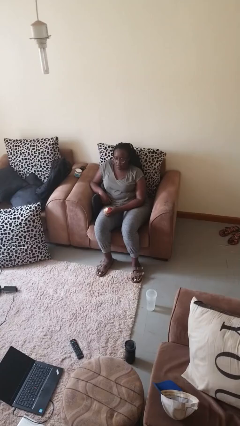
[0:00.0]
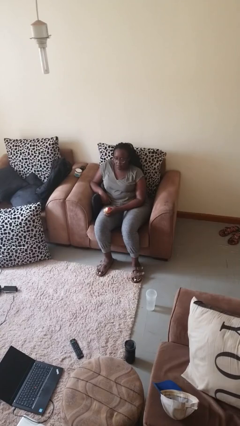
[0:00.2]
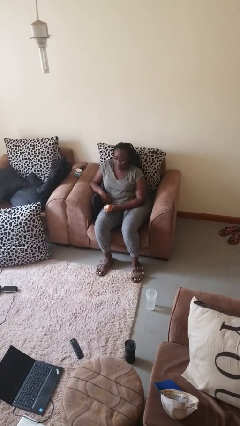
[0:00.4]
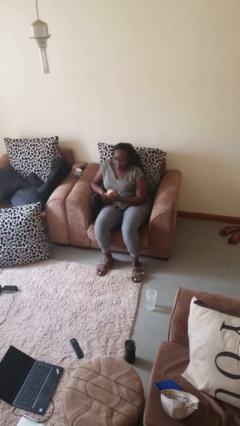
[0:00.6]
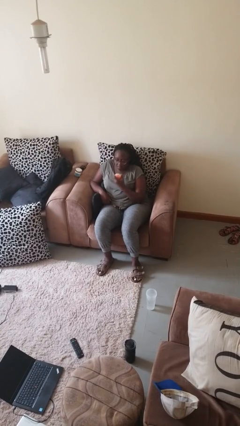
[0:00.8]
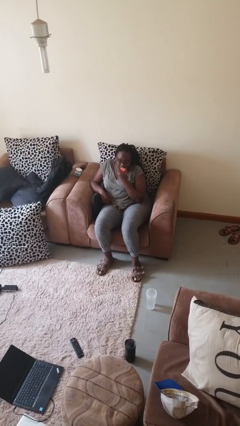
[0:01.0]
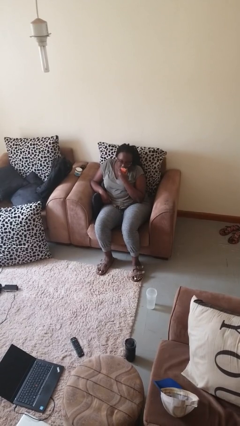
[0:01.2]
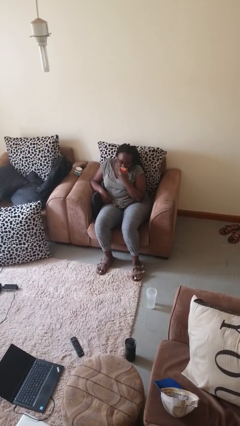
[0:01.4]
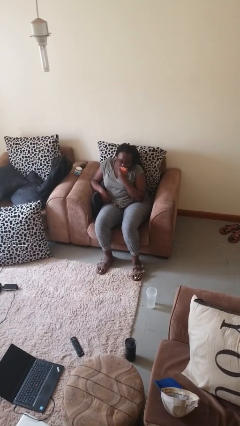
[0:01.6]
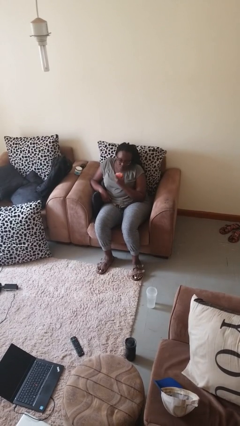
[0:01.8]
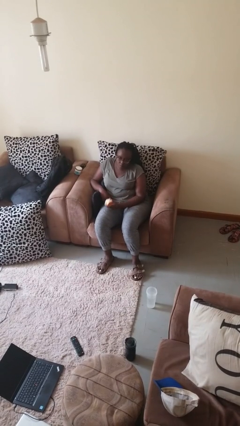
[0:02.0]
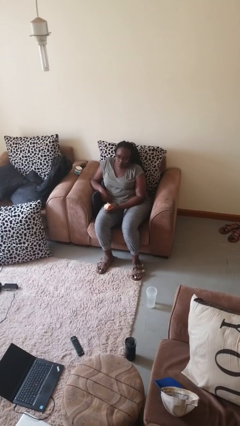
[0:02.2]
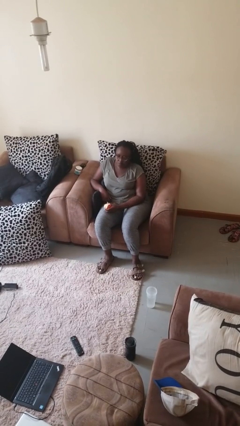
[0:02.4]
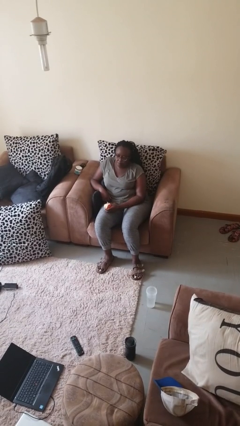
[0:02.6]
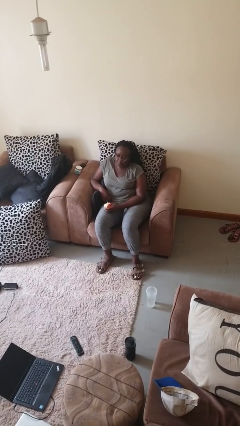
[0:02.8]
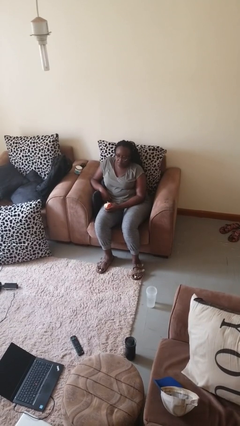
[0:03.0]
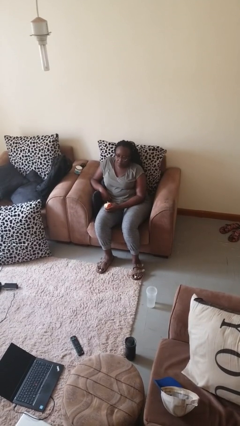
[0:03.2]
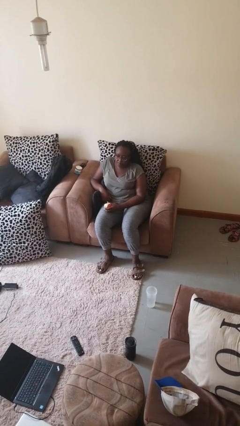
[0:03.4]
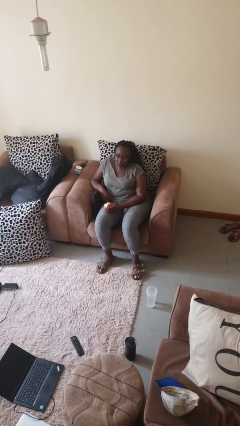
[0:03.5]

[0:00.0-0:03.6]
person eats apple

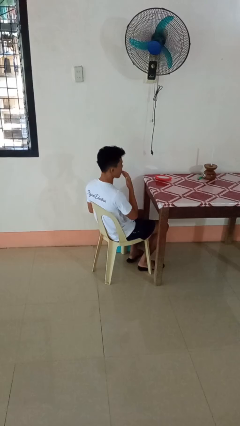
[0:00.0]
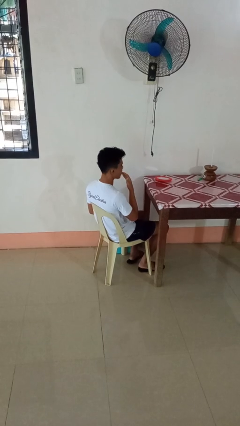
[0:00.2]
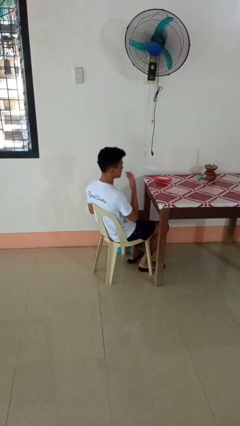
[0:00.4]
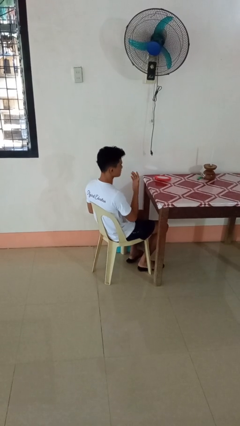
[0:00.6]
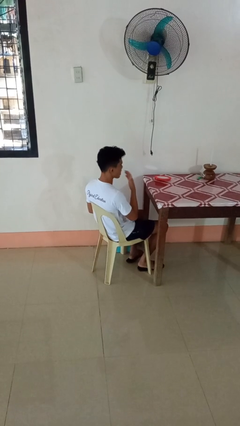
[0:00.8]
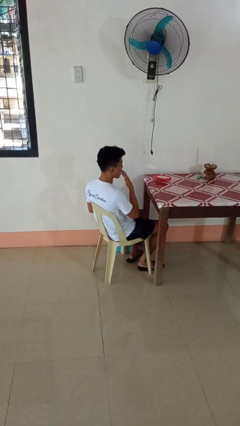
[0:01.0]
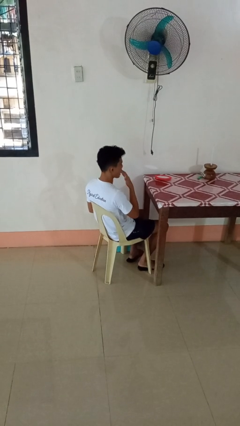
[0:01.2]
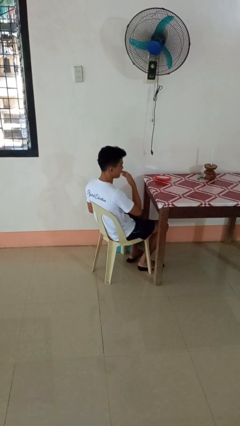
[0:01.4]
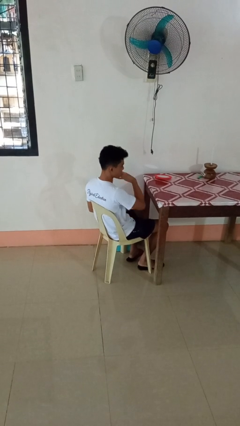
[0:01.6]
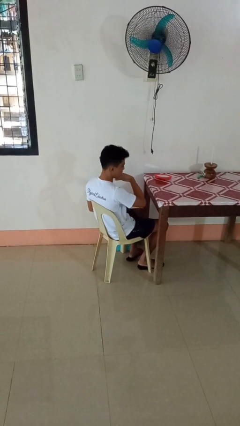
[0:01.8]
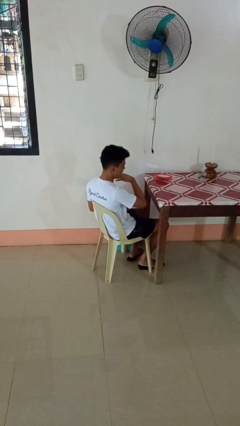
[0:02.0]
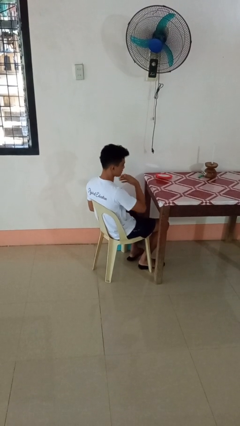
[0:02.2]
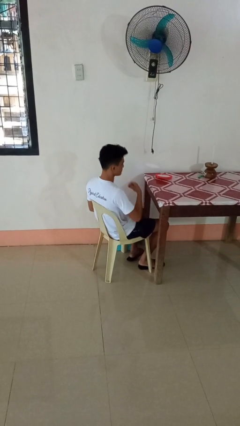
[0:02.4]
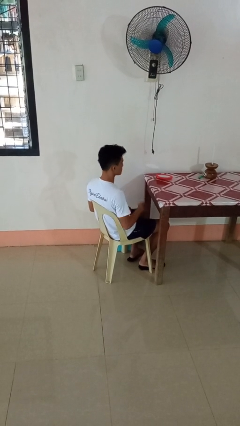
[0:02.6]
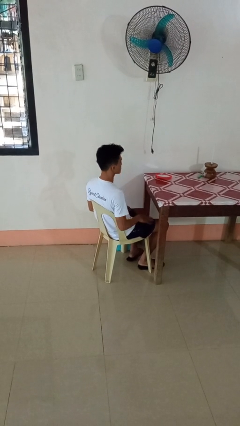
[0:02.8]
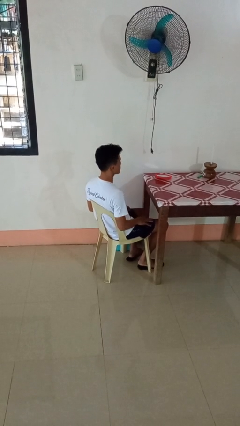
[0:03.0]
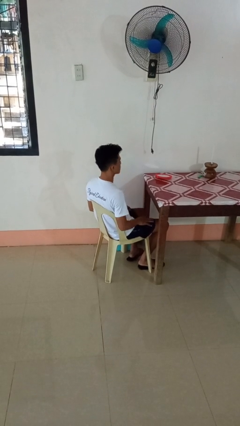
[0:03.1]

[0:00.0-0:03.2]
person licks fingers

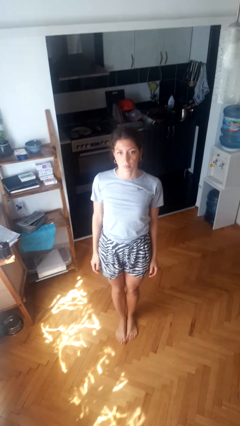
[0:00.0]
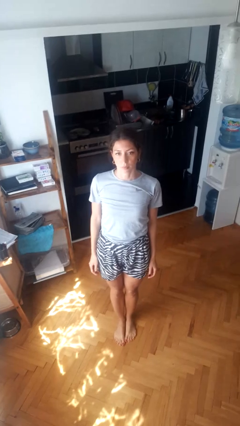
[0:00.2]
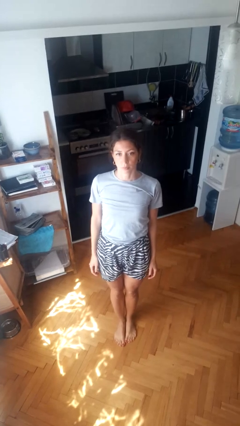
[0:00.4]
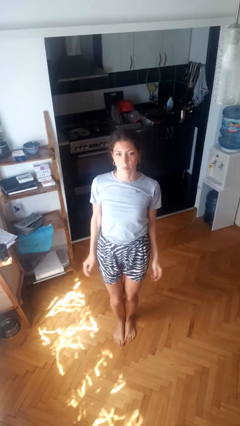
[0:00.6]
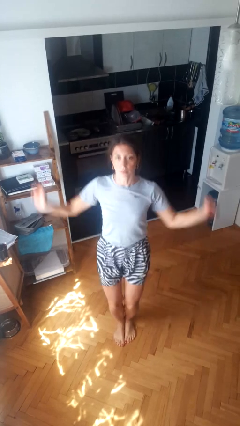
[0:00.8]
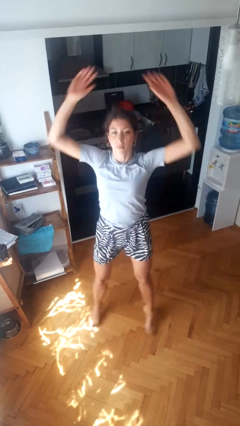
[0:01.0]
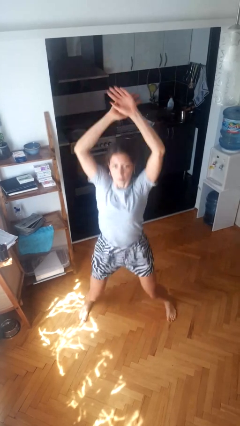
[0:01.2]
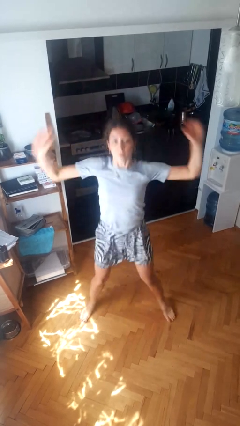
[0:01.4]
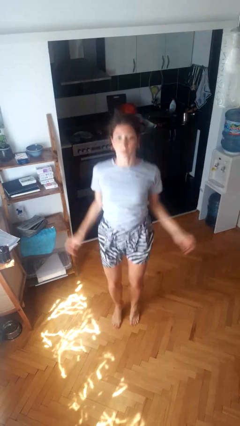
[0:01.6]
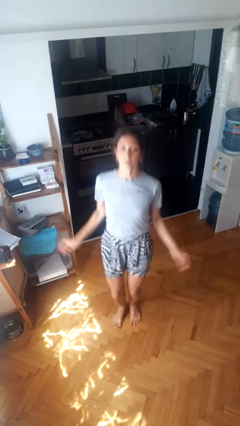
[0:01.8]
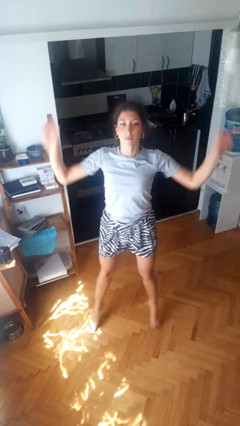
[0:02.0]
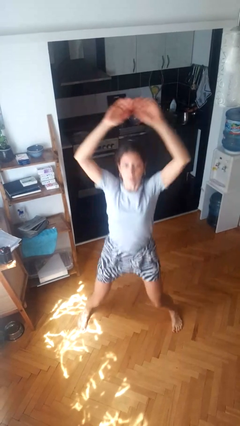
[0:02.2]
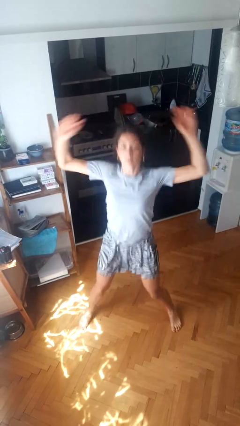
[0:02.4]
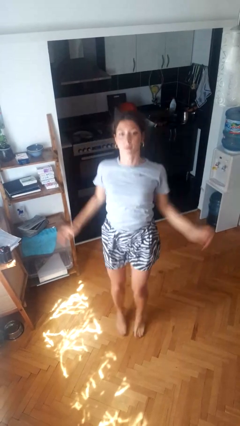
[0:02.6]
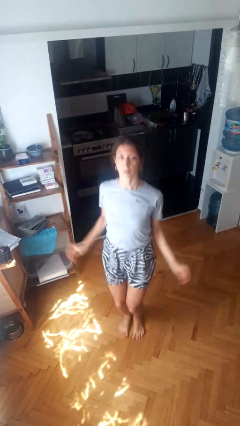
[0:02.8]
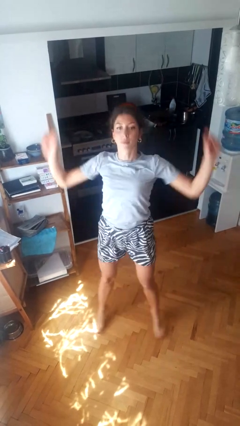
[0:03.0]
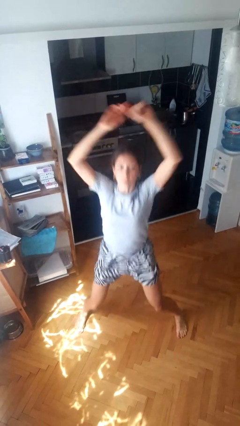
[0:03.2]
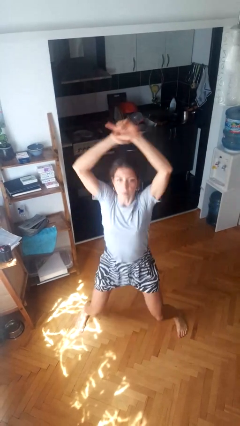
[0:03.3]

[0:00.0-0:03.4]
person exercises with jumping jacks

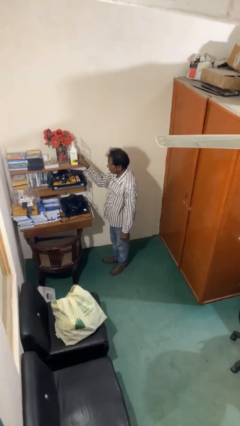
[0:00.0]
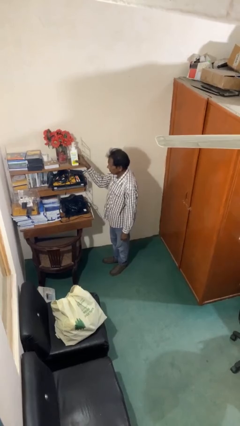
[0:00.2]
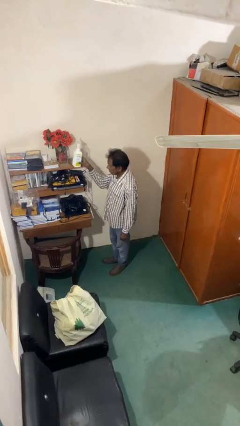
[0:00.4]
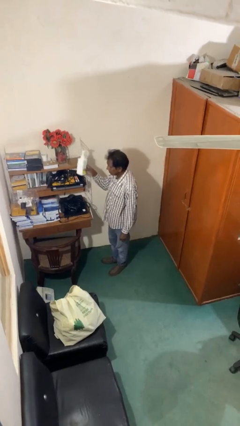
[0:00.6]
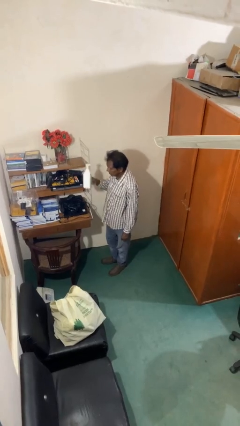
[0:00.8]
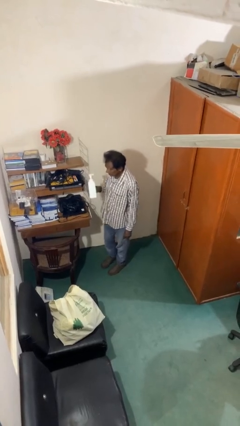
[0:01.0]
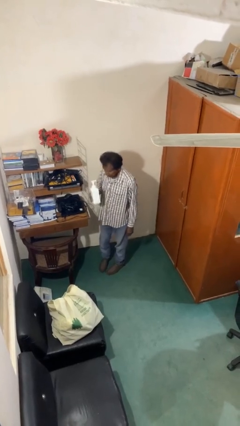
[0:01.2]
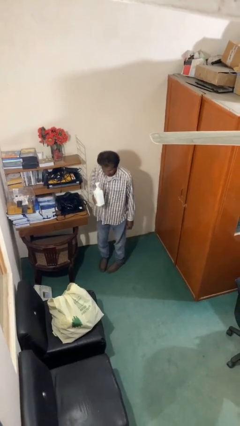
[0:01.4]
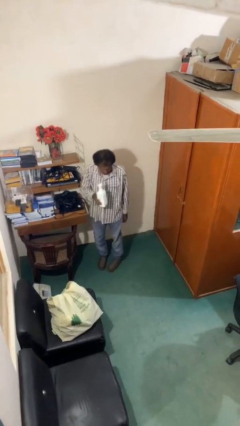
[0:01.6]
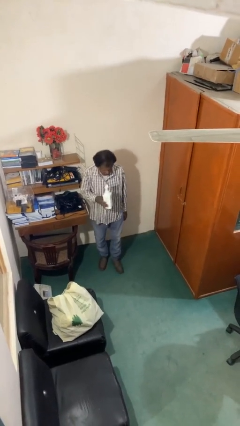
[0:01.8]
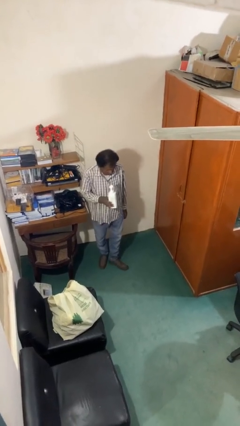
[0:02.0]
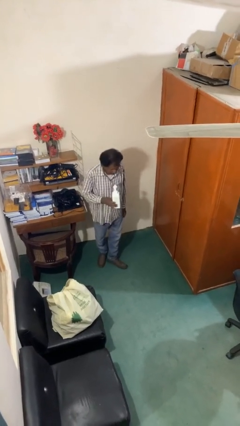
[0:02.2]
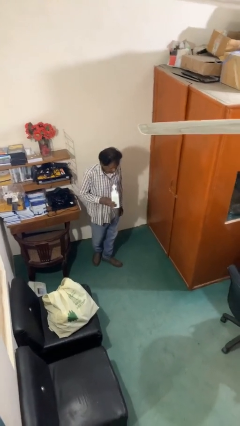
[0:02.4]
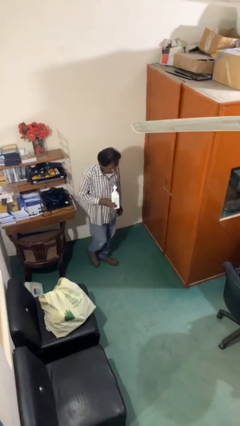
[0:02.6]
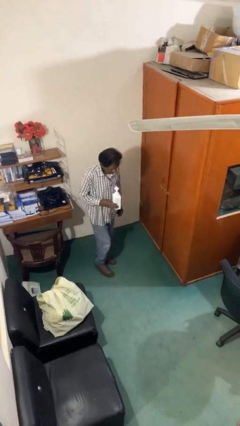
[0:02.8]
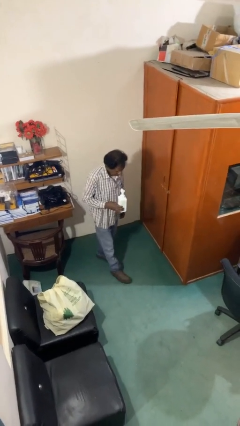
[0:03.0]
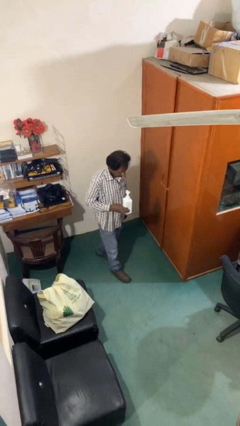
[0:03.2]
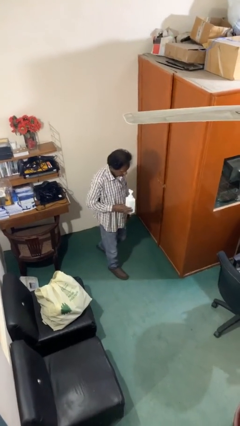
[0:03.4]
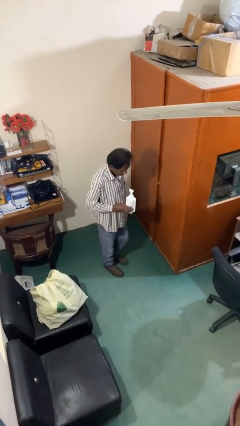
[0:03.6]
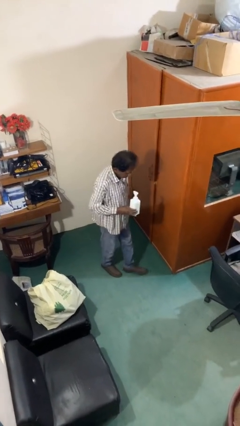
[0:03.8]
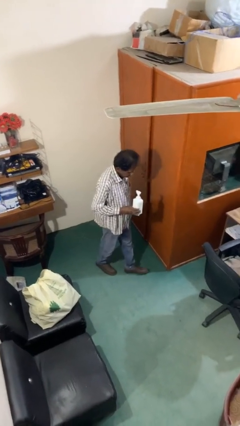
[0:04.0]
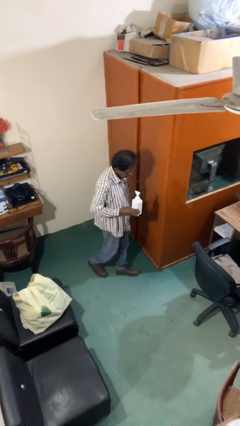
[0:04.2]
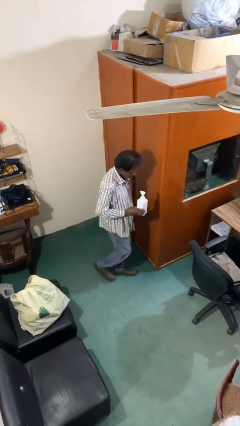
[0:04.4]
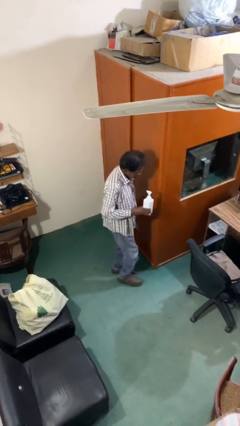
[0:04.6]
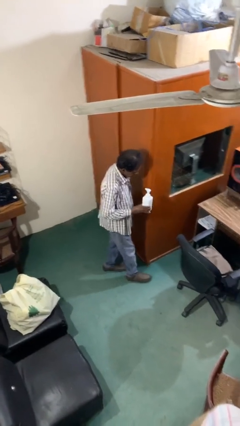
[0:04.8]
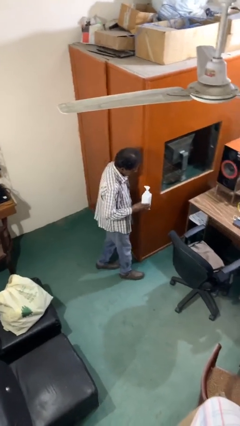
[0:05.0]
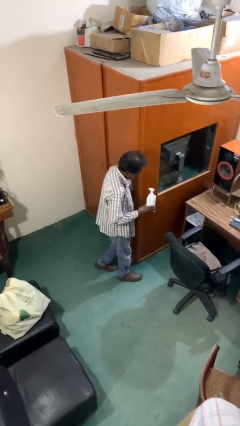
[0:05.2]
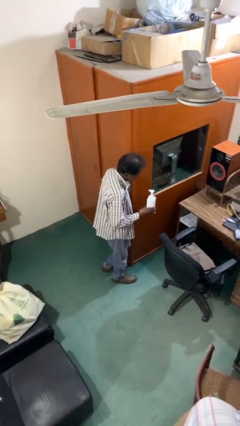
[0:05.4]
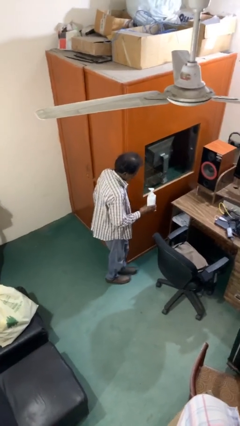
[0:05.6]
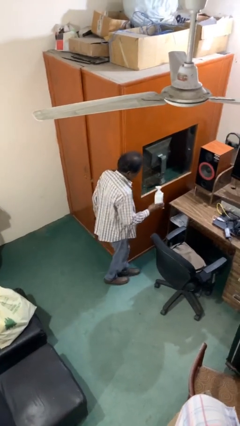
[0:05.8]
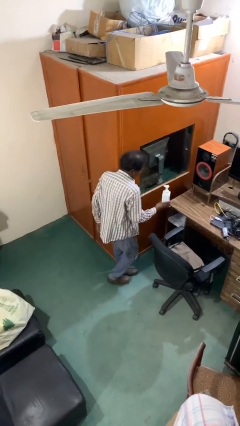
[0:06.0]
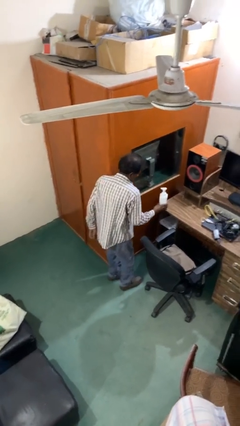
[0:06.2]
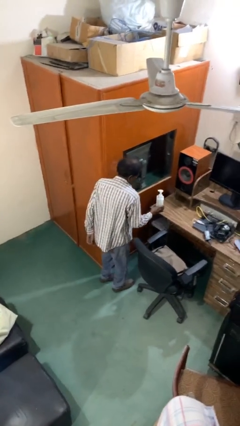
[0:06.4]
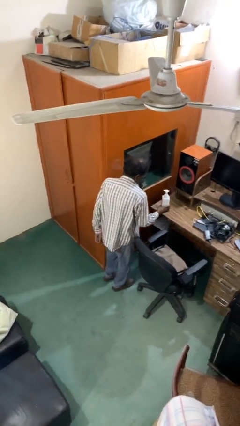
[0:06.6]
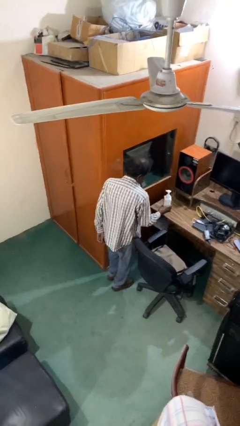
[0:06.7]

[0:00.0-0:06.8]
person picks up object from shelf

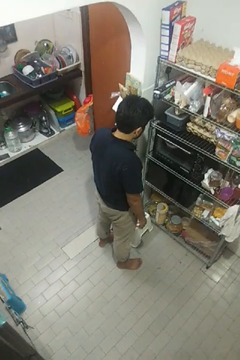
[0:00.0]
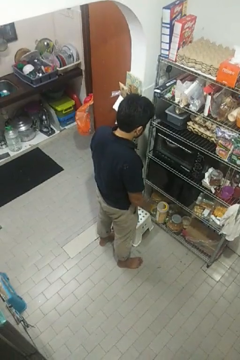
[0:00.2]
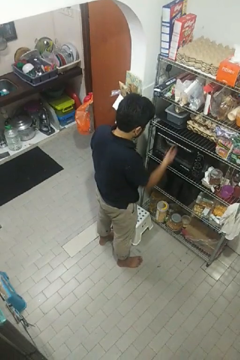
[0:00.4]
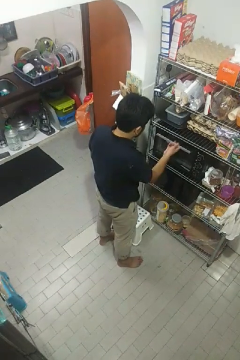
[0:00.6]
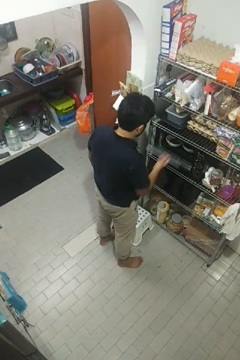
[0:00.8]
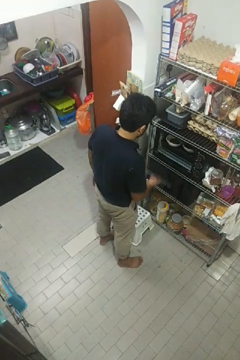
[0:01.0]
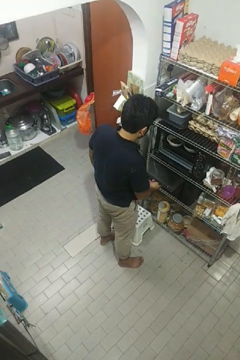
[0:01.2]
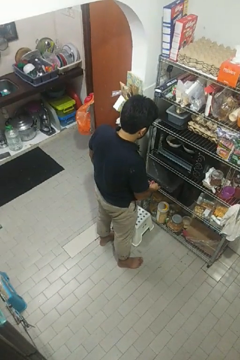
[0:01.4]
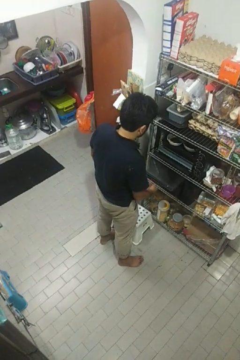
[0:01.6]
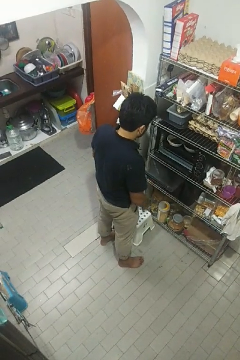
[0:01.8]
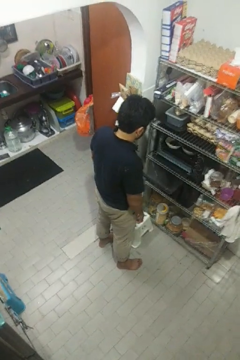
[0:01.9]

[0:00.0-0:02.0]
person opens oven door
